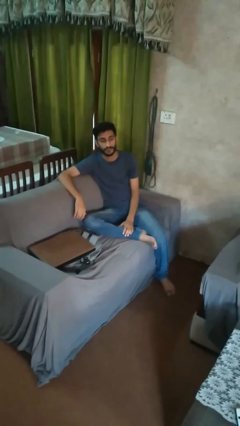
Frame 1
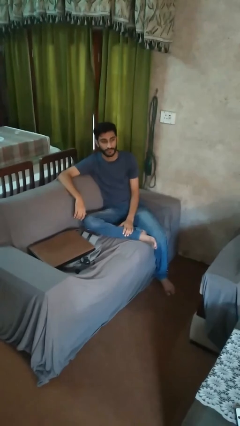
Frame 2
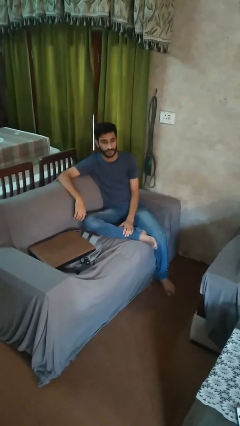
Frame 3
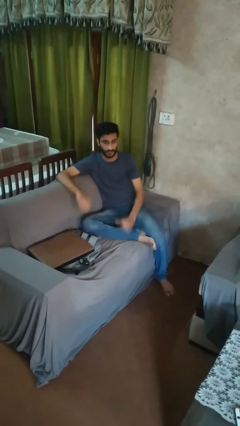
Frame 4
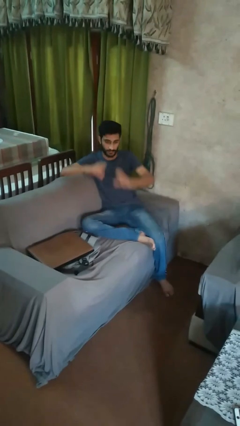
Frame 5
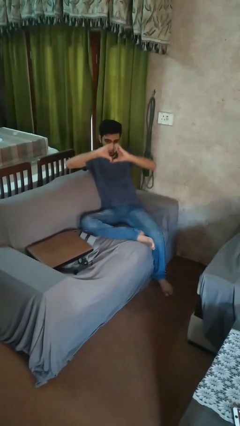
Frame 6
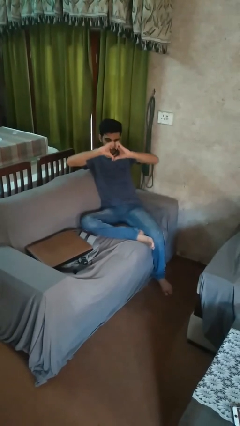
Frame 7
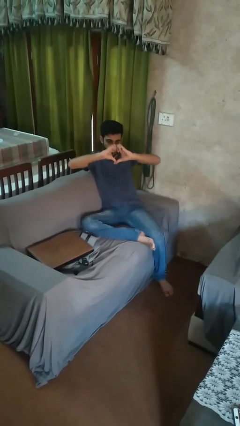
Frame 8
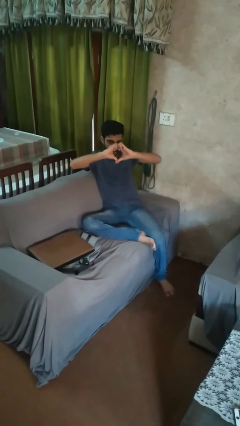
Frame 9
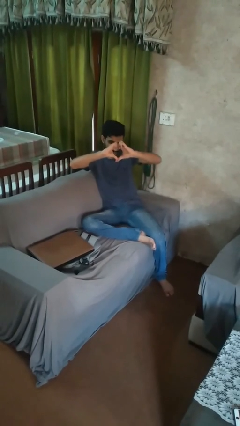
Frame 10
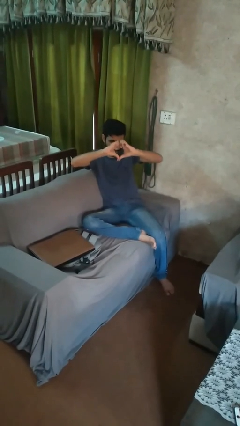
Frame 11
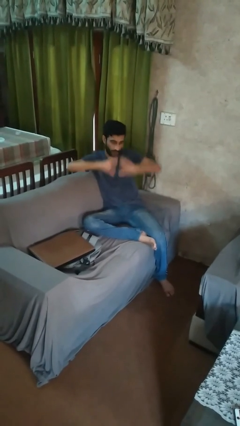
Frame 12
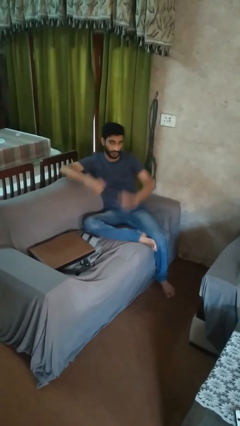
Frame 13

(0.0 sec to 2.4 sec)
person gestures heart

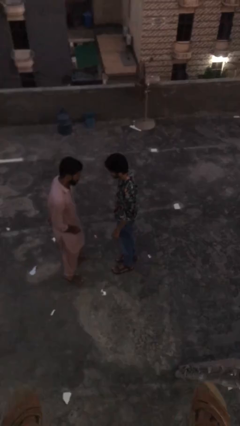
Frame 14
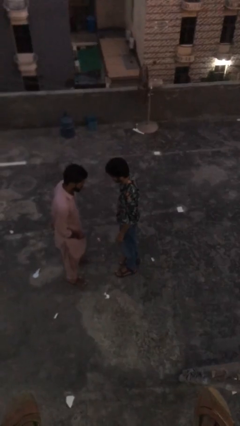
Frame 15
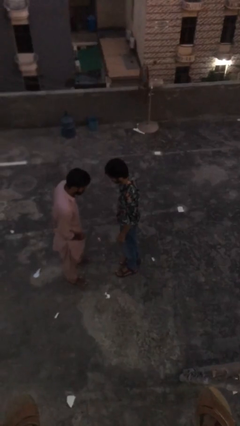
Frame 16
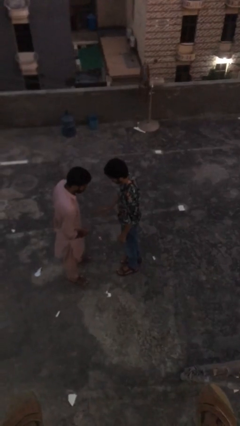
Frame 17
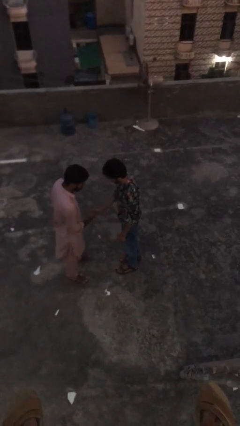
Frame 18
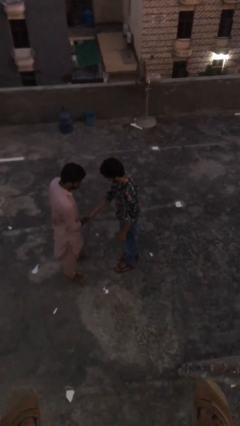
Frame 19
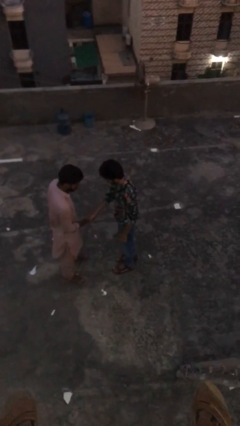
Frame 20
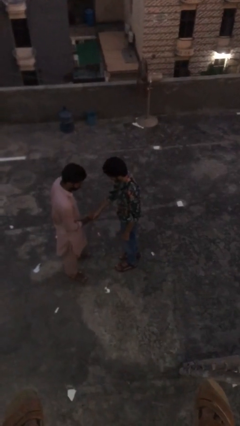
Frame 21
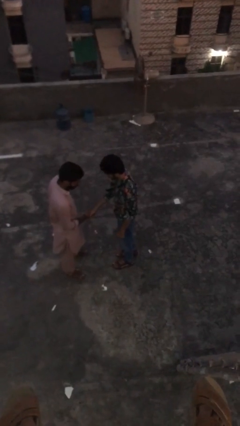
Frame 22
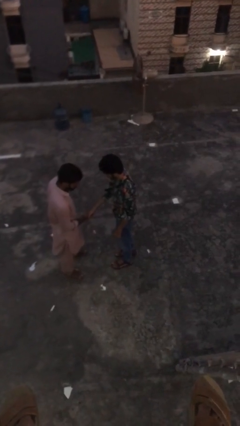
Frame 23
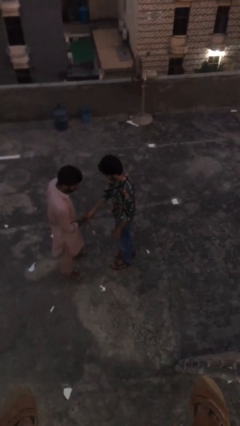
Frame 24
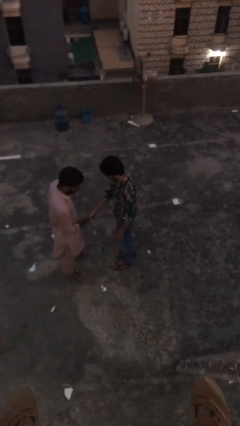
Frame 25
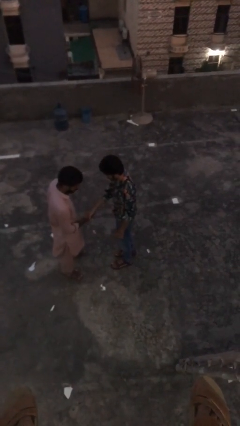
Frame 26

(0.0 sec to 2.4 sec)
person shakes hand

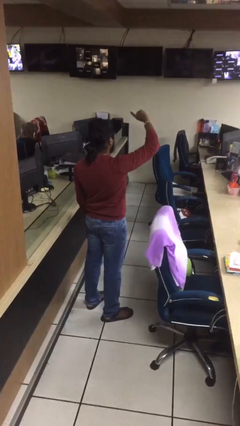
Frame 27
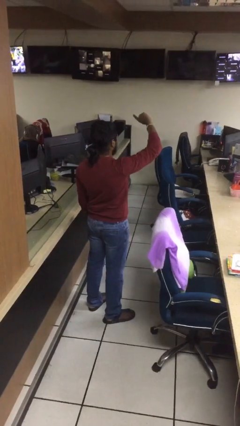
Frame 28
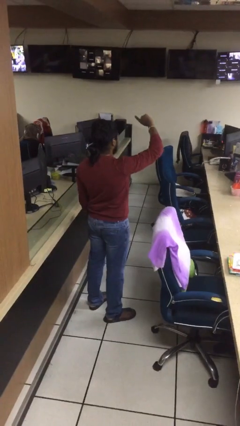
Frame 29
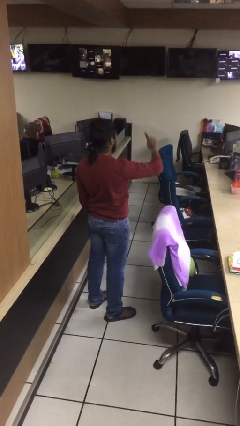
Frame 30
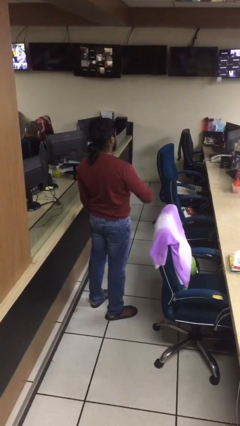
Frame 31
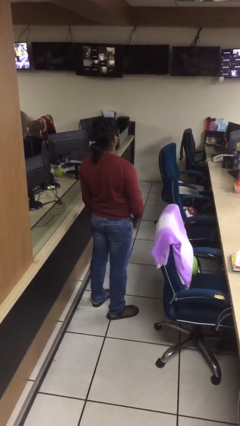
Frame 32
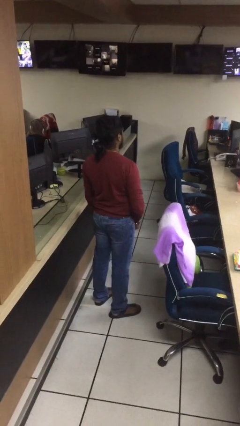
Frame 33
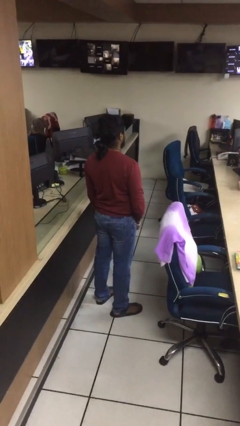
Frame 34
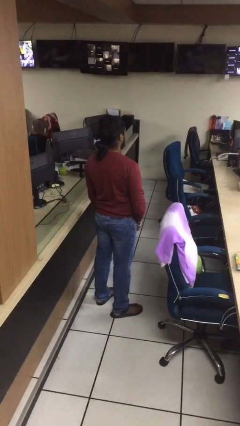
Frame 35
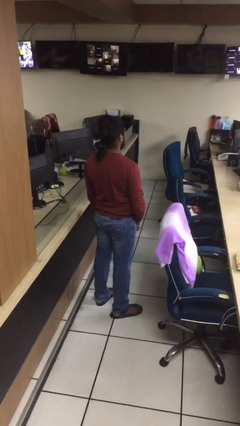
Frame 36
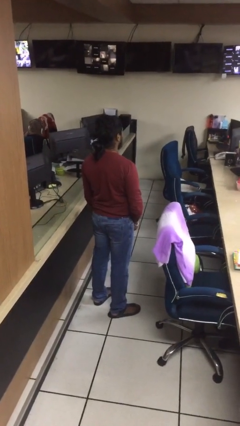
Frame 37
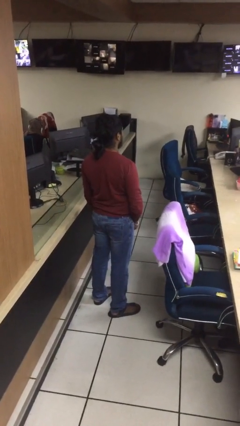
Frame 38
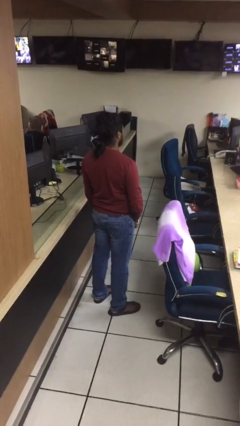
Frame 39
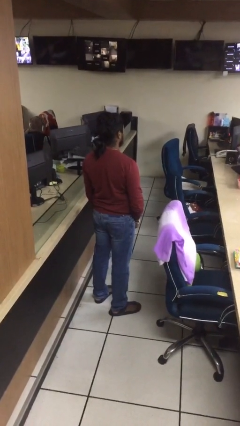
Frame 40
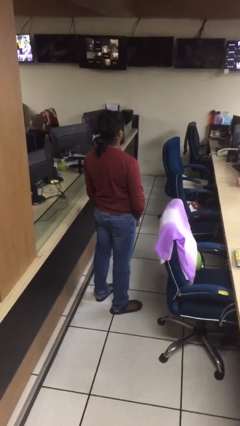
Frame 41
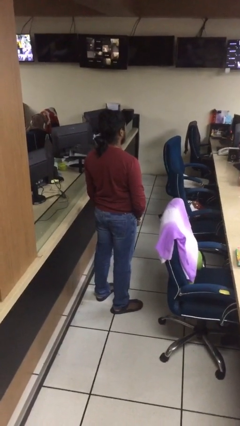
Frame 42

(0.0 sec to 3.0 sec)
person gestures swipe down

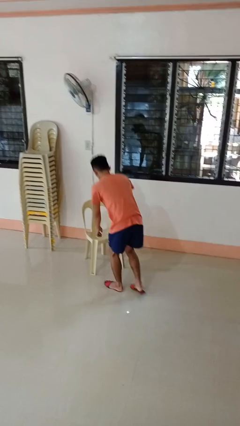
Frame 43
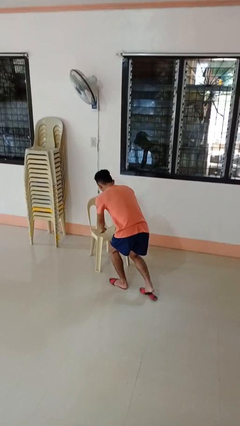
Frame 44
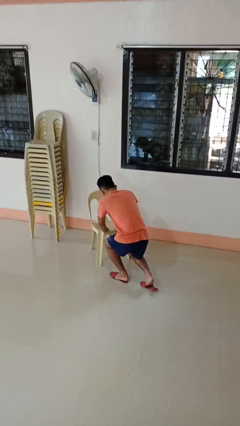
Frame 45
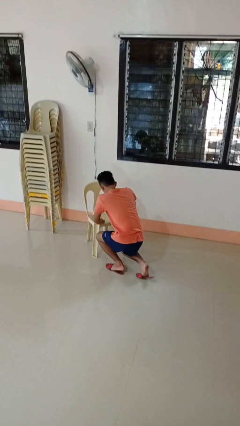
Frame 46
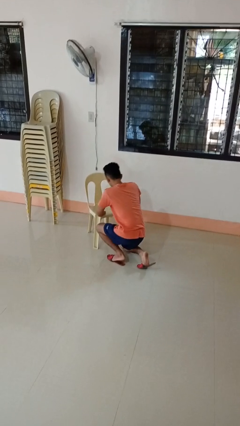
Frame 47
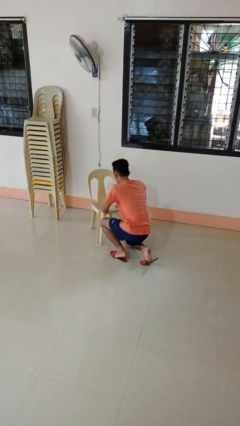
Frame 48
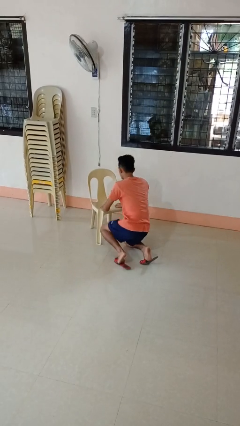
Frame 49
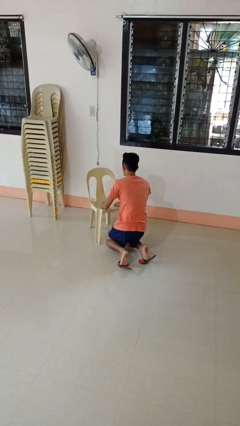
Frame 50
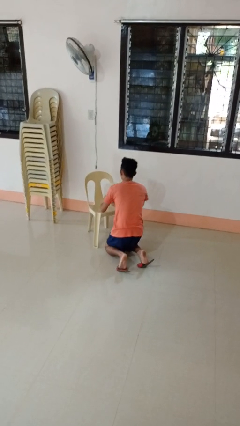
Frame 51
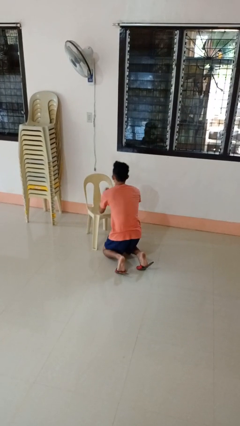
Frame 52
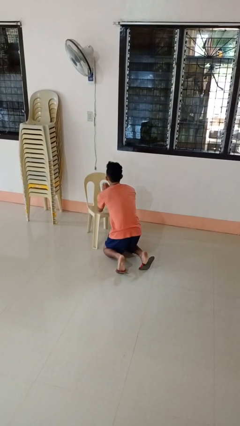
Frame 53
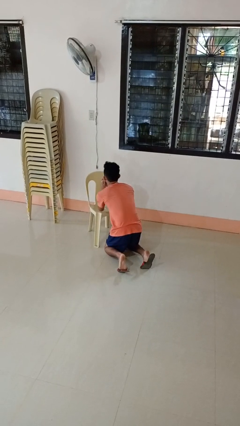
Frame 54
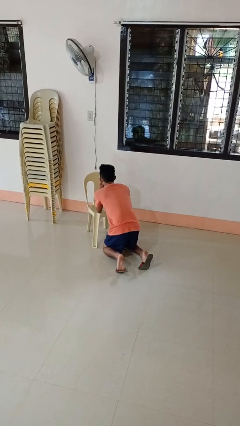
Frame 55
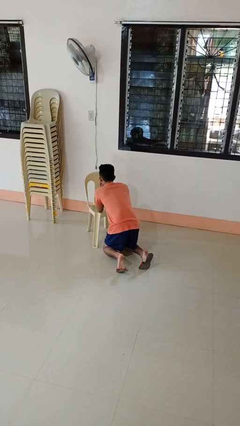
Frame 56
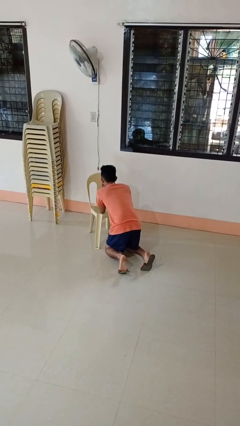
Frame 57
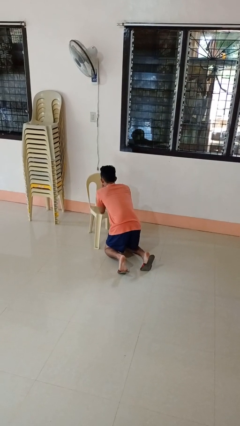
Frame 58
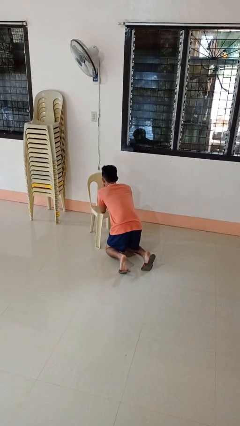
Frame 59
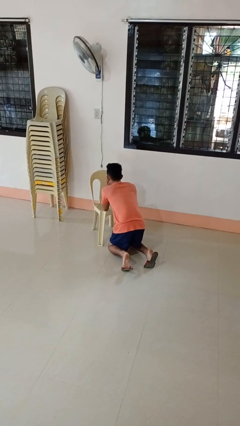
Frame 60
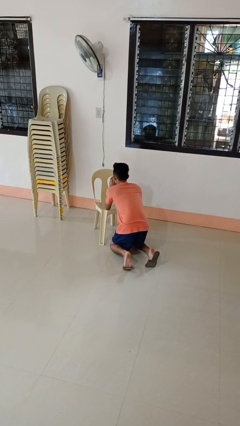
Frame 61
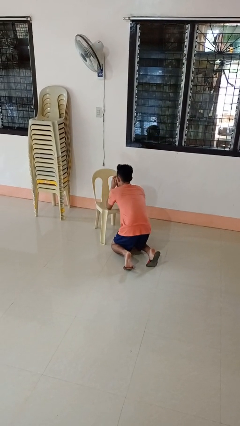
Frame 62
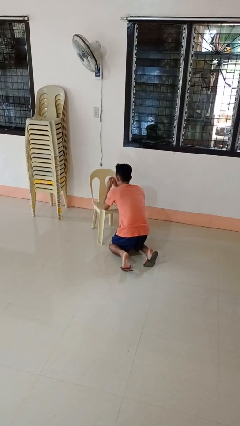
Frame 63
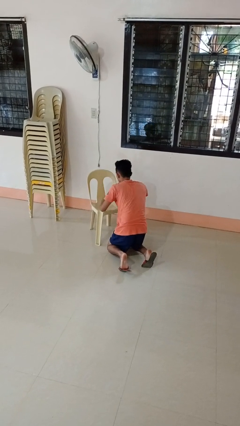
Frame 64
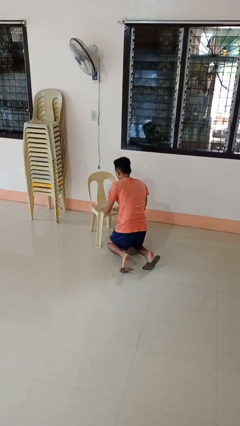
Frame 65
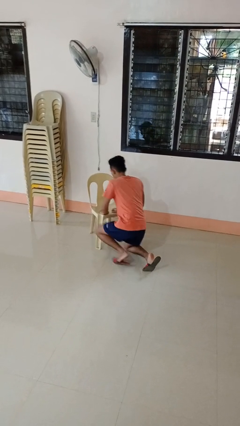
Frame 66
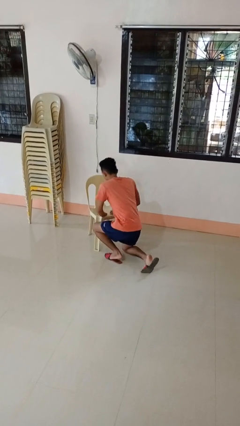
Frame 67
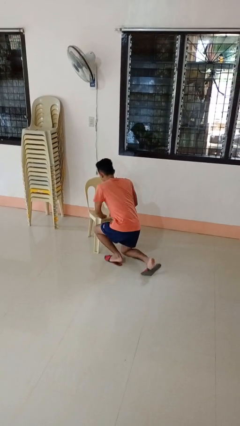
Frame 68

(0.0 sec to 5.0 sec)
person prays

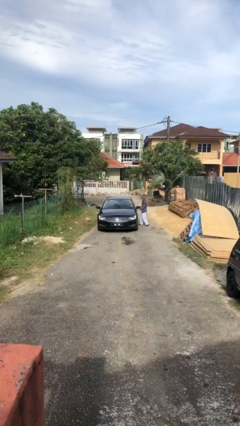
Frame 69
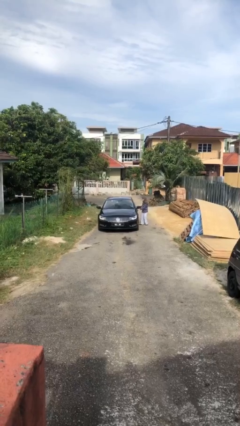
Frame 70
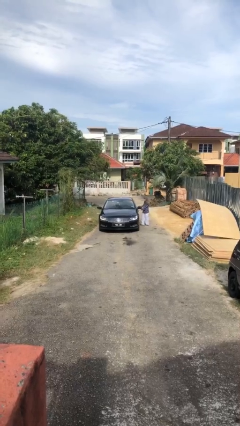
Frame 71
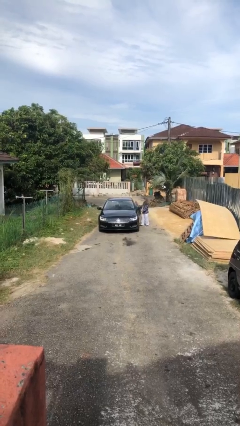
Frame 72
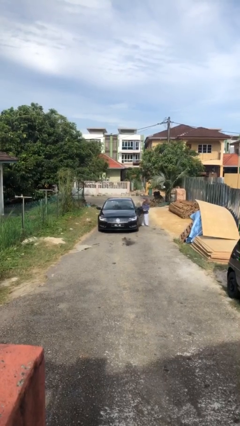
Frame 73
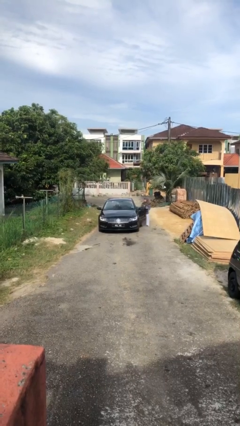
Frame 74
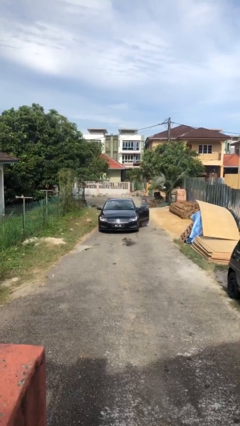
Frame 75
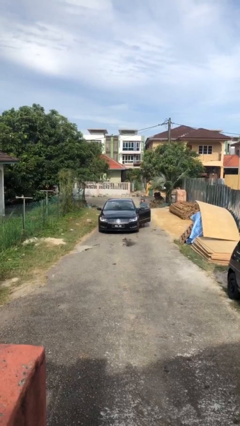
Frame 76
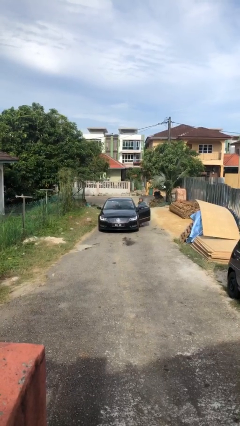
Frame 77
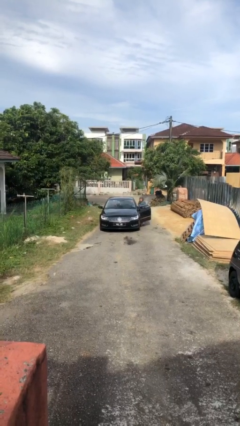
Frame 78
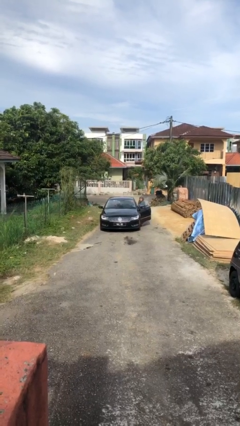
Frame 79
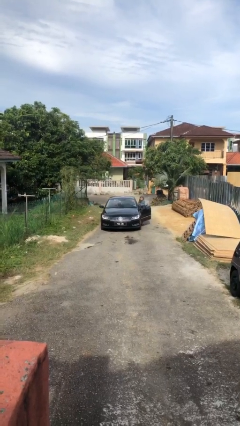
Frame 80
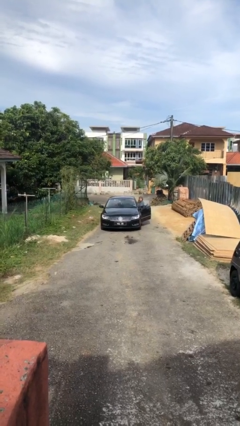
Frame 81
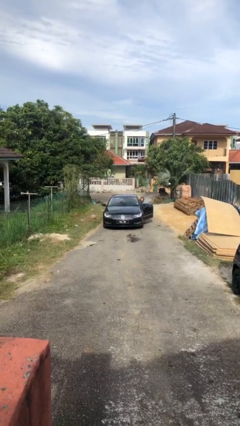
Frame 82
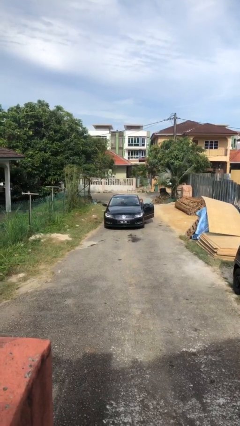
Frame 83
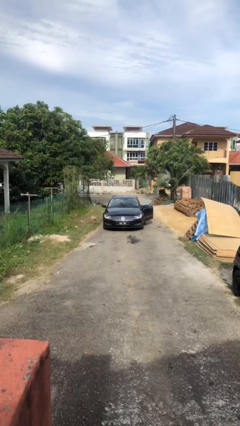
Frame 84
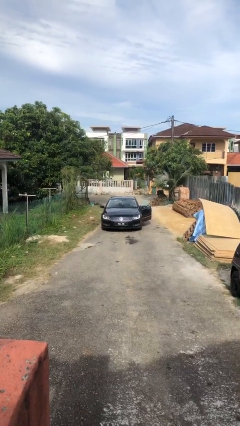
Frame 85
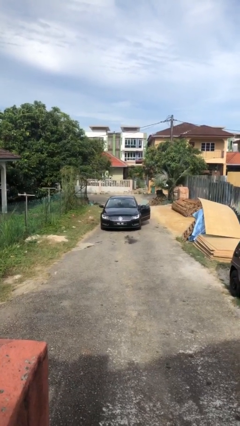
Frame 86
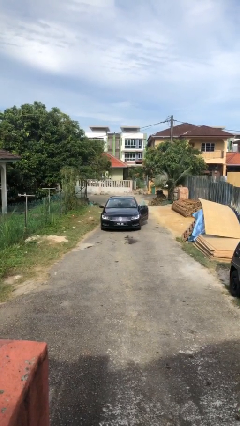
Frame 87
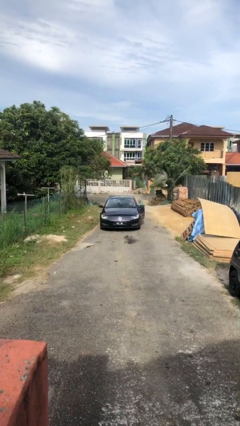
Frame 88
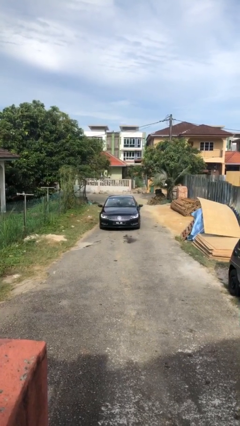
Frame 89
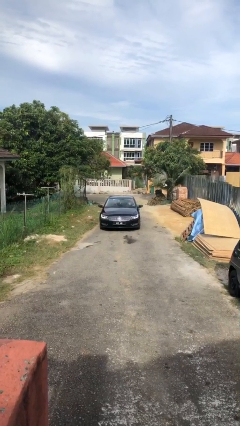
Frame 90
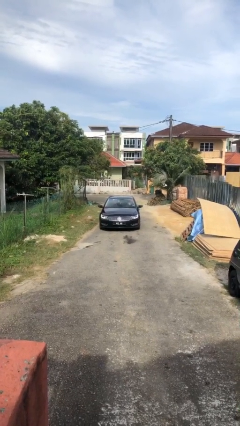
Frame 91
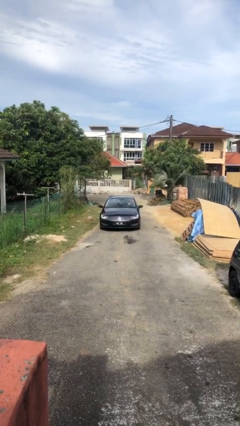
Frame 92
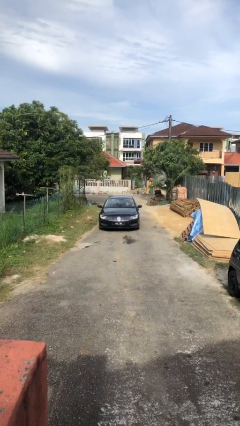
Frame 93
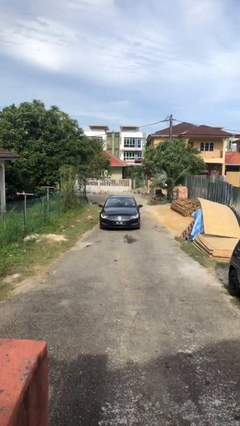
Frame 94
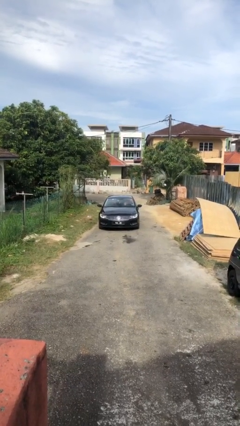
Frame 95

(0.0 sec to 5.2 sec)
car picks up person
